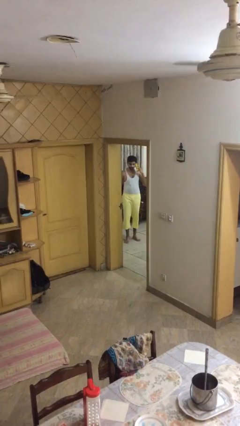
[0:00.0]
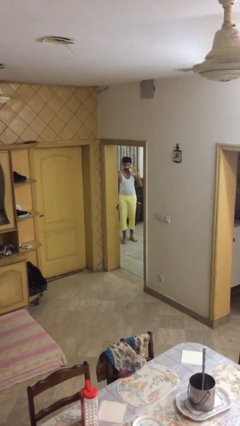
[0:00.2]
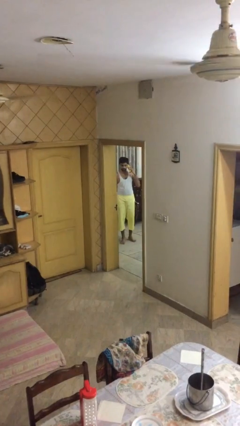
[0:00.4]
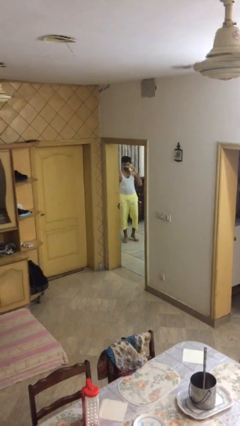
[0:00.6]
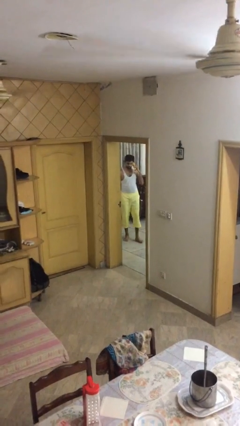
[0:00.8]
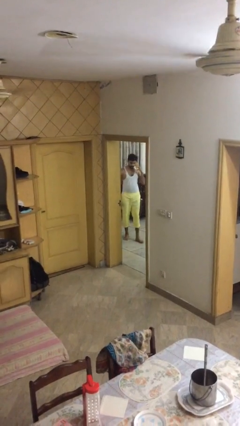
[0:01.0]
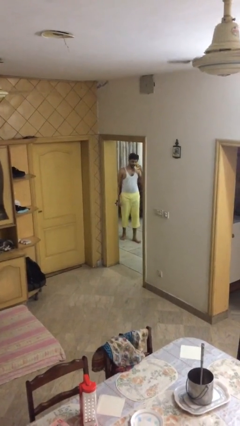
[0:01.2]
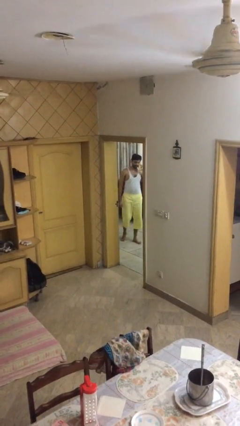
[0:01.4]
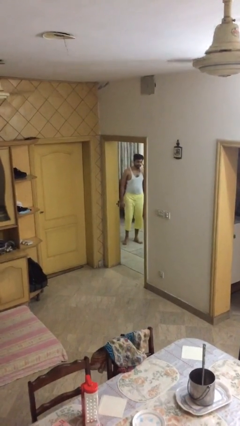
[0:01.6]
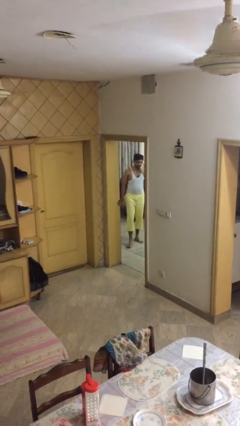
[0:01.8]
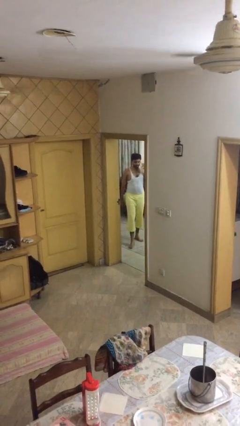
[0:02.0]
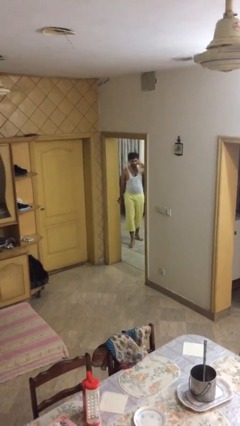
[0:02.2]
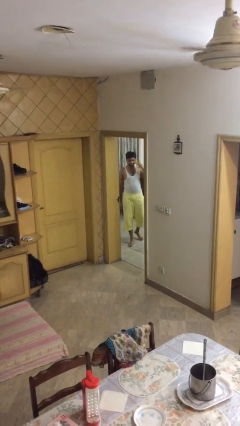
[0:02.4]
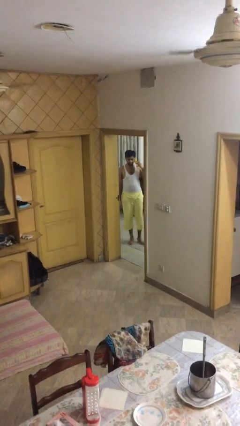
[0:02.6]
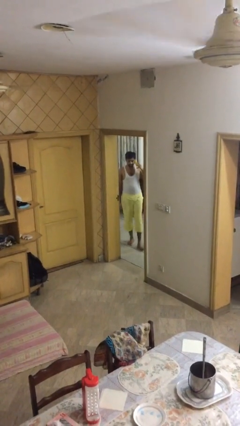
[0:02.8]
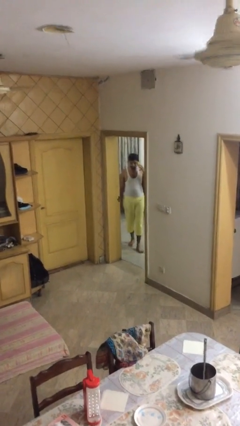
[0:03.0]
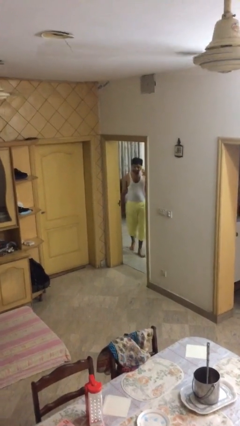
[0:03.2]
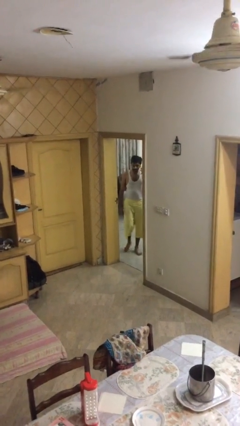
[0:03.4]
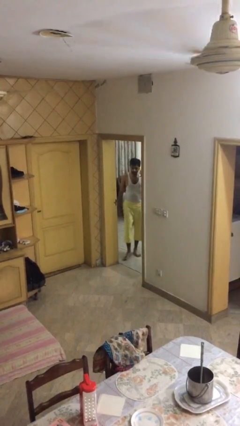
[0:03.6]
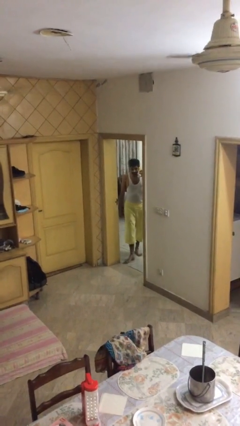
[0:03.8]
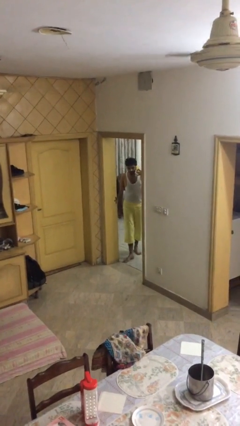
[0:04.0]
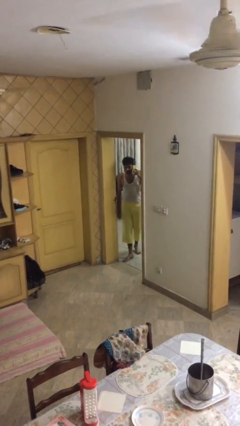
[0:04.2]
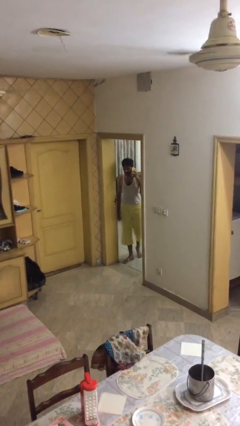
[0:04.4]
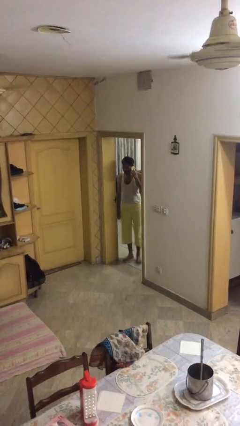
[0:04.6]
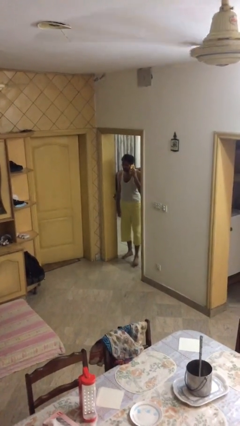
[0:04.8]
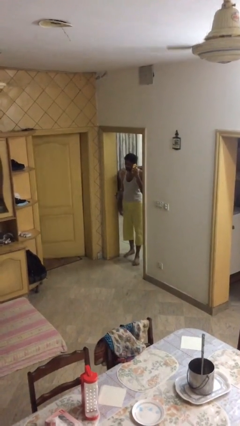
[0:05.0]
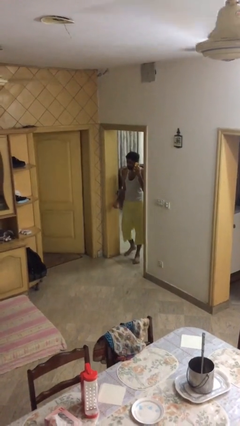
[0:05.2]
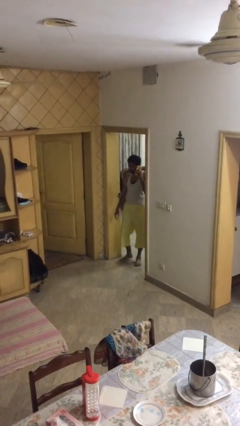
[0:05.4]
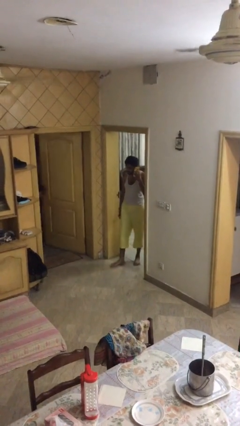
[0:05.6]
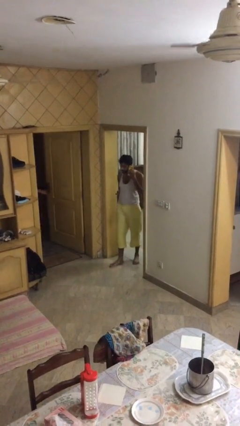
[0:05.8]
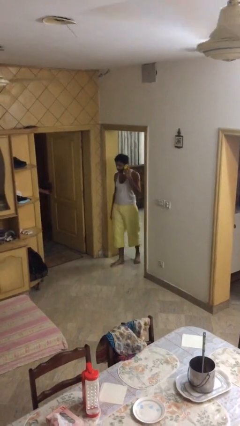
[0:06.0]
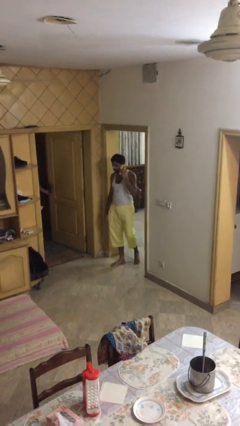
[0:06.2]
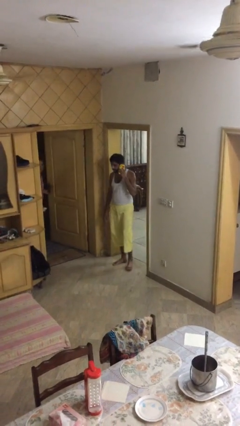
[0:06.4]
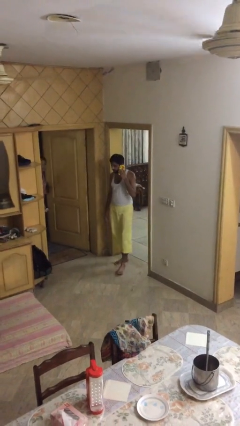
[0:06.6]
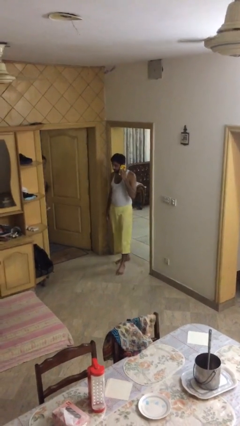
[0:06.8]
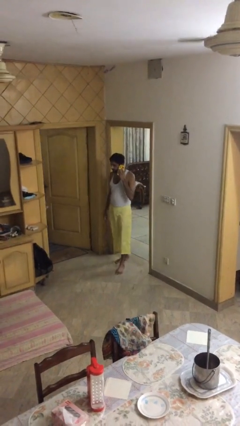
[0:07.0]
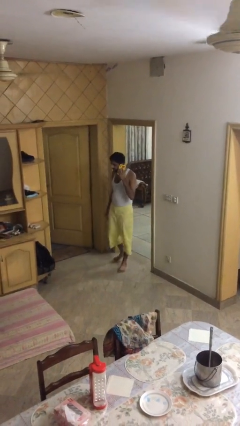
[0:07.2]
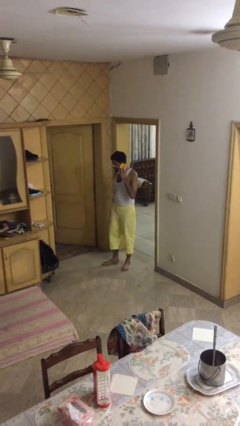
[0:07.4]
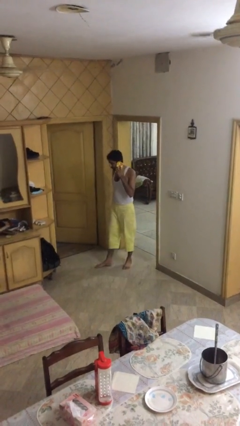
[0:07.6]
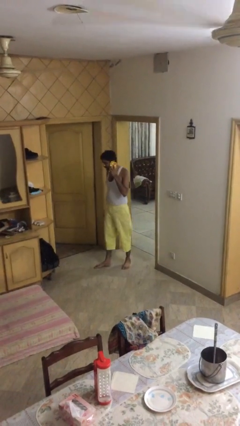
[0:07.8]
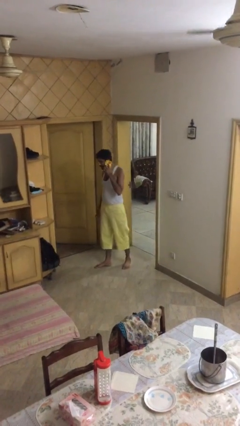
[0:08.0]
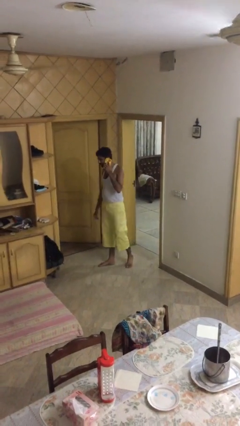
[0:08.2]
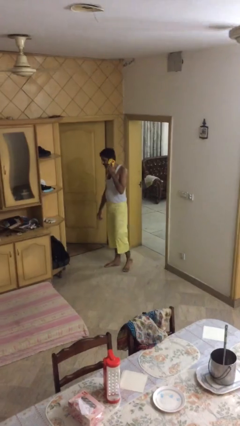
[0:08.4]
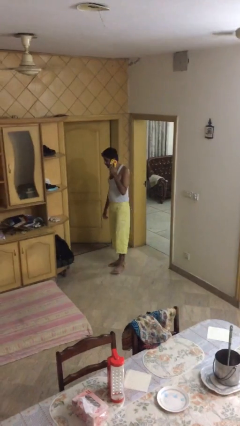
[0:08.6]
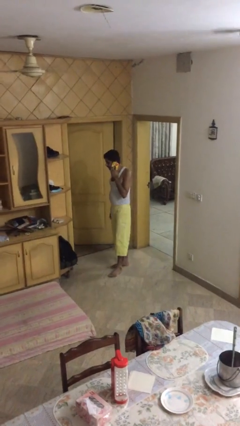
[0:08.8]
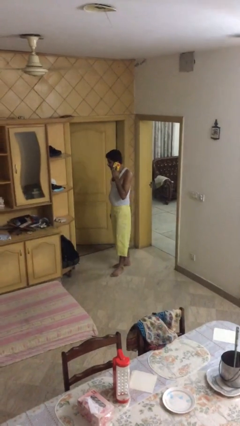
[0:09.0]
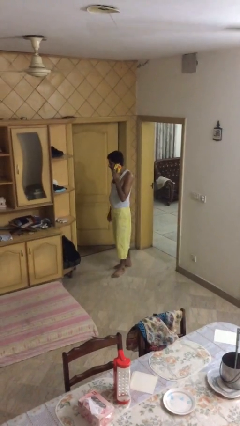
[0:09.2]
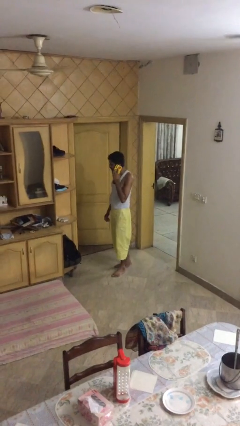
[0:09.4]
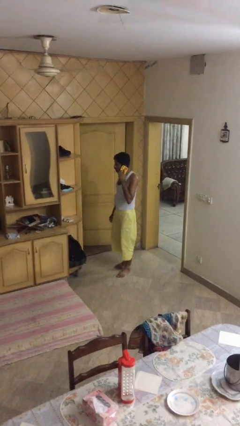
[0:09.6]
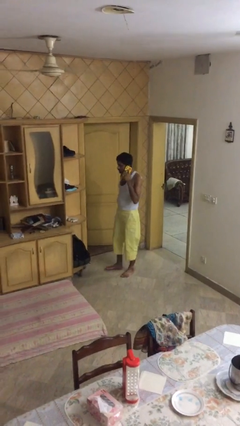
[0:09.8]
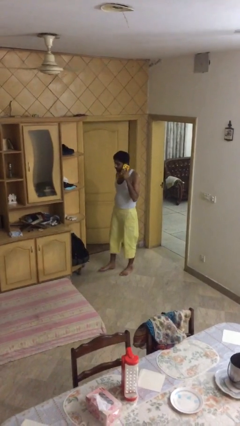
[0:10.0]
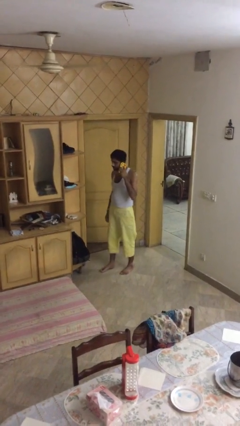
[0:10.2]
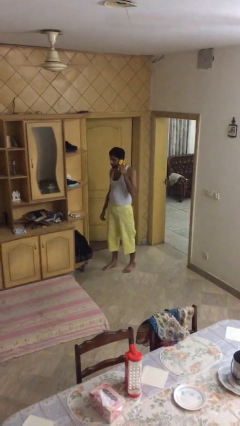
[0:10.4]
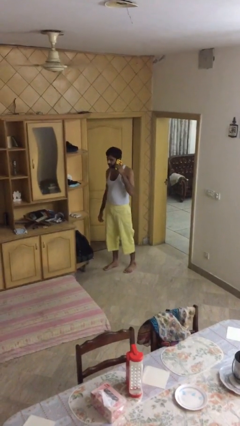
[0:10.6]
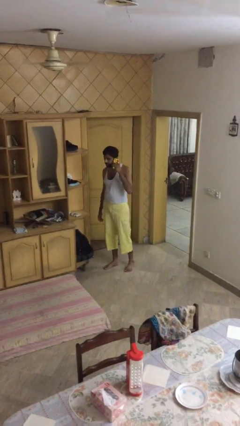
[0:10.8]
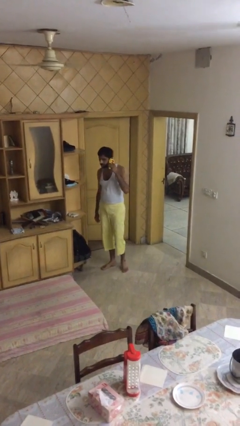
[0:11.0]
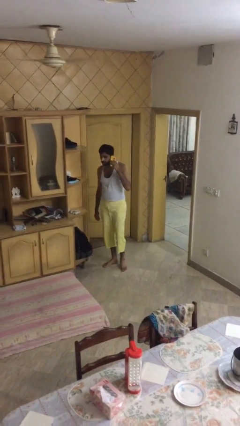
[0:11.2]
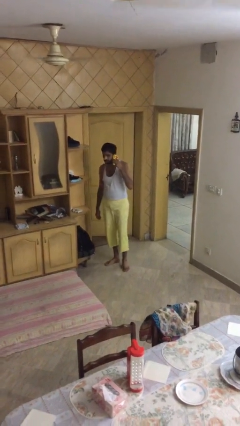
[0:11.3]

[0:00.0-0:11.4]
person enters scene through structure

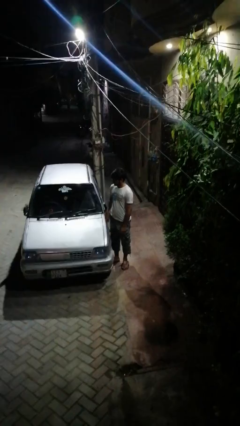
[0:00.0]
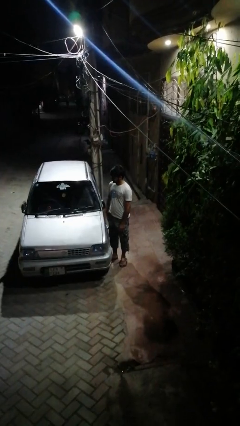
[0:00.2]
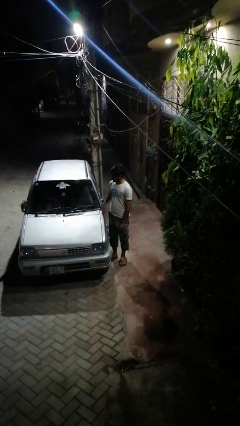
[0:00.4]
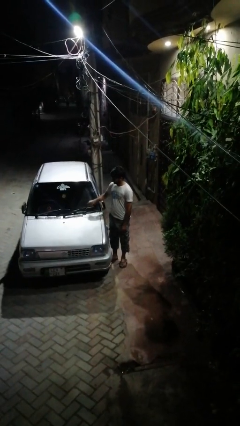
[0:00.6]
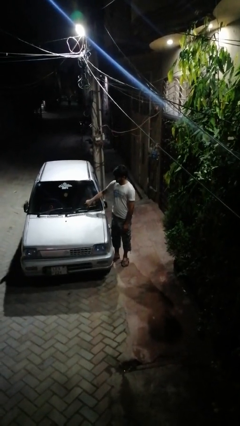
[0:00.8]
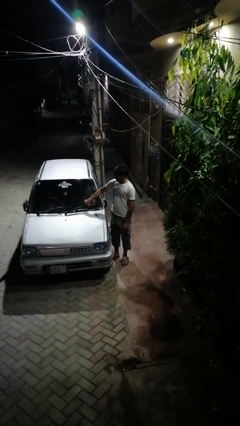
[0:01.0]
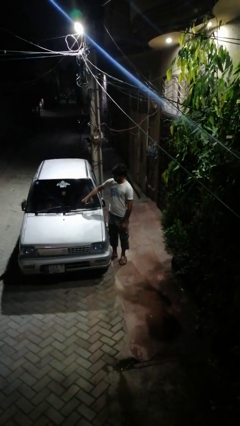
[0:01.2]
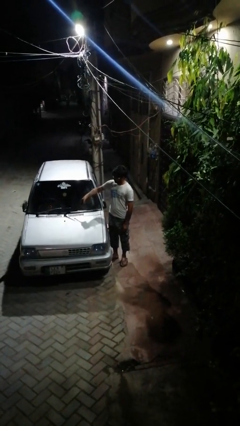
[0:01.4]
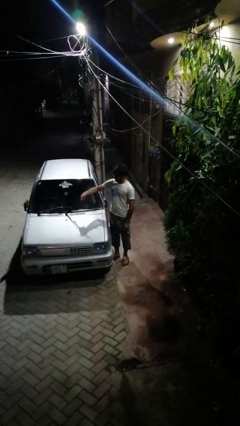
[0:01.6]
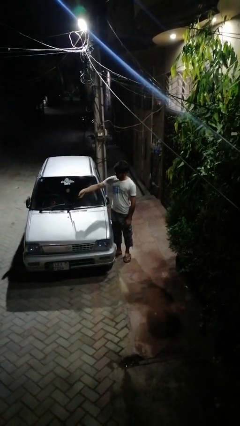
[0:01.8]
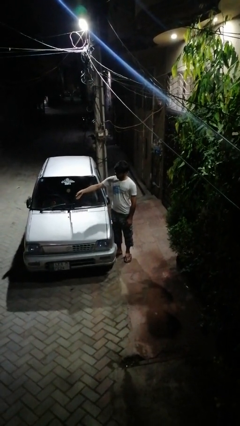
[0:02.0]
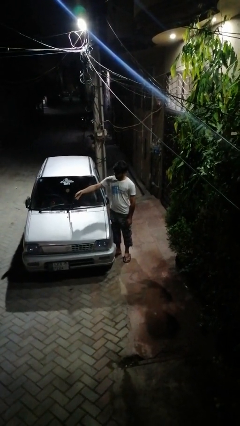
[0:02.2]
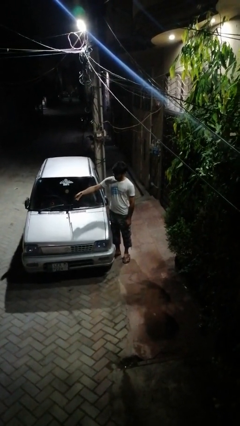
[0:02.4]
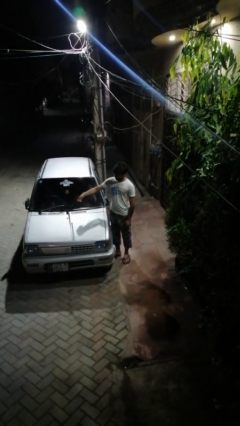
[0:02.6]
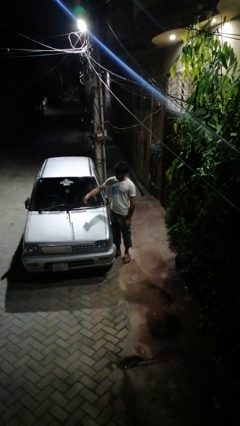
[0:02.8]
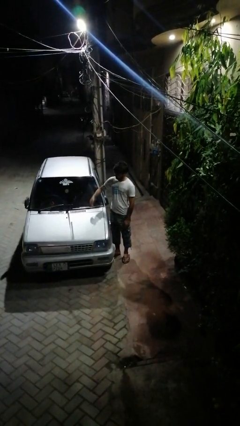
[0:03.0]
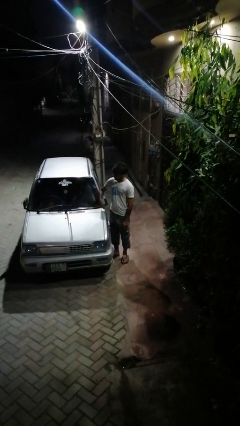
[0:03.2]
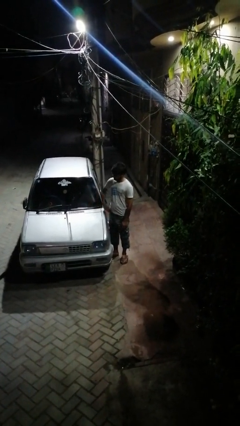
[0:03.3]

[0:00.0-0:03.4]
person flips up car wipers

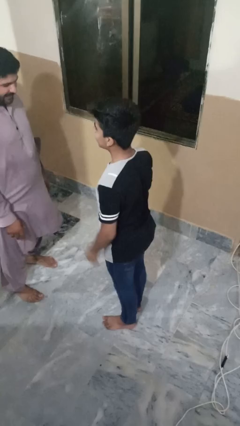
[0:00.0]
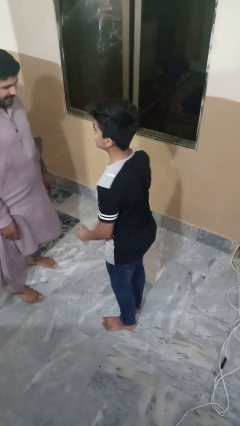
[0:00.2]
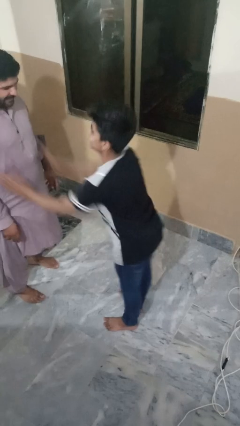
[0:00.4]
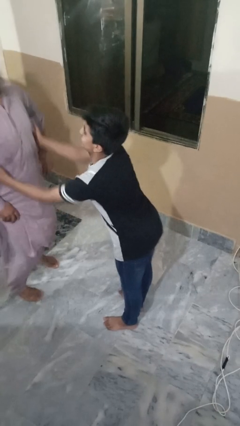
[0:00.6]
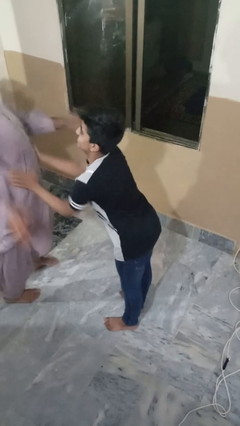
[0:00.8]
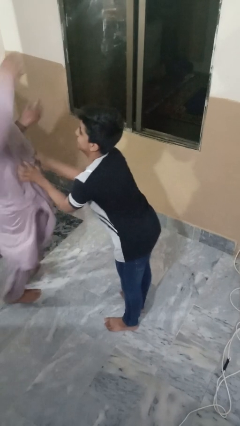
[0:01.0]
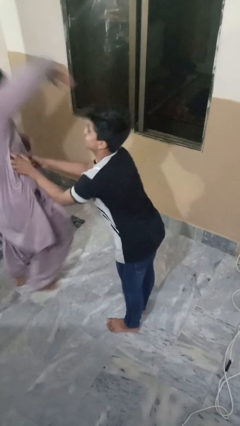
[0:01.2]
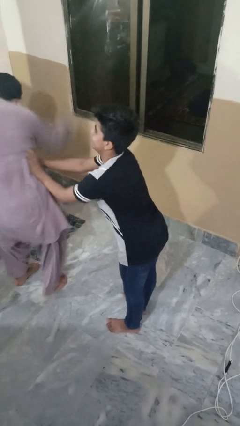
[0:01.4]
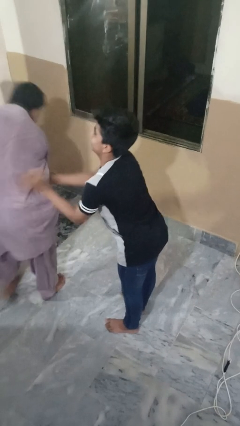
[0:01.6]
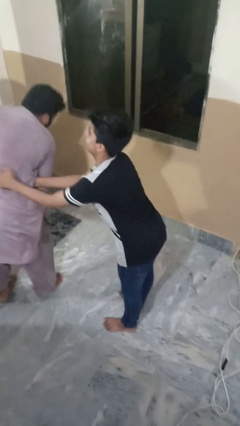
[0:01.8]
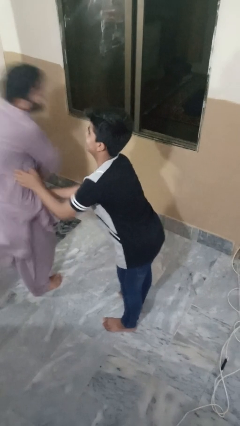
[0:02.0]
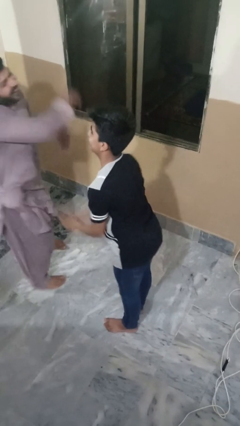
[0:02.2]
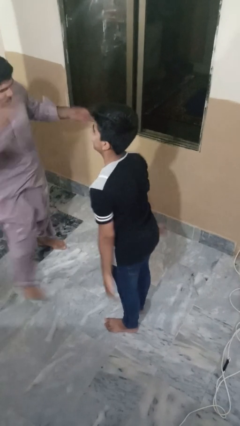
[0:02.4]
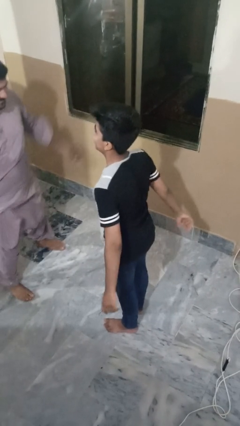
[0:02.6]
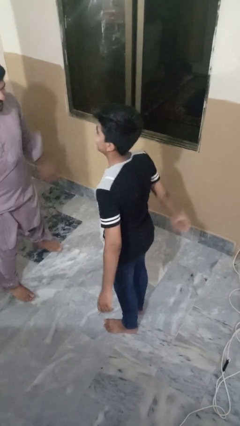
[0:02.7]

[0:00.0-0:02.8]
person tickles person

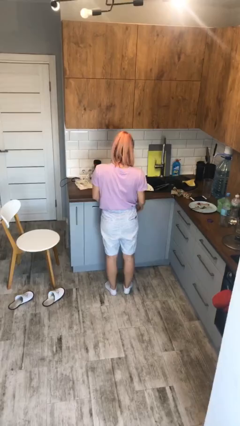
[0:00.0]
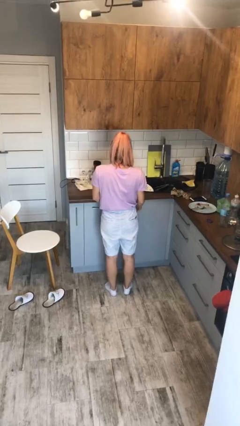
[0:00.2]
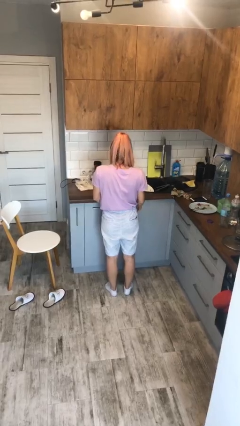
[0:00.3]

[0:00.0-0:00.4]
person closes cabinet
